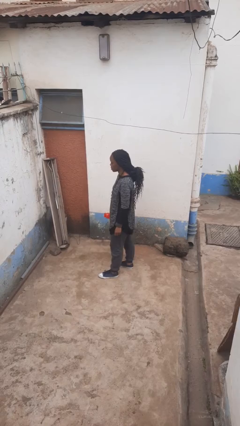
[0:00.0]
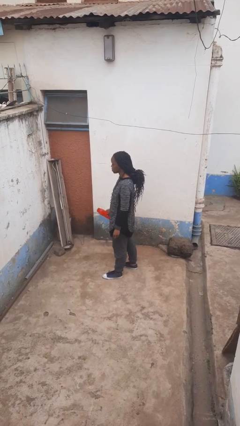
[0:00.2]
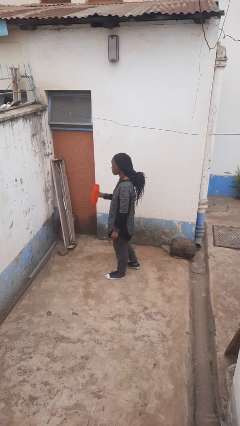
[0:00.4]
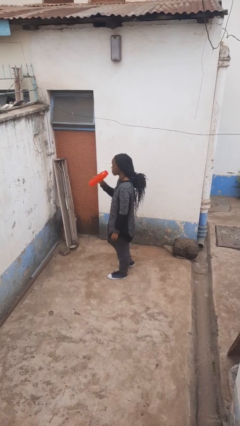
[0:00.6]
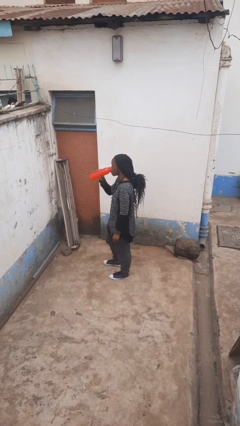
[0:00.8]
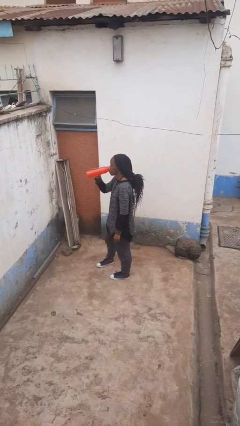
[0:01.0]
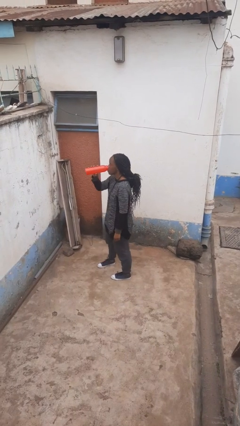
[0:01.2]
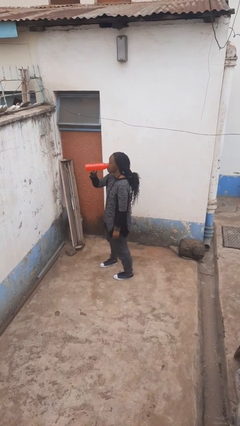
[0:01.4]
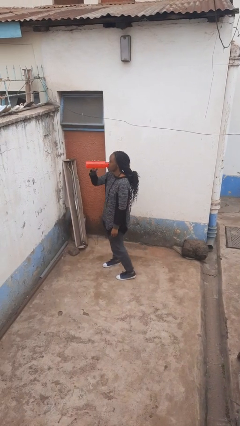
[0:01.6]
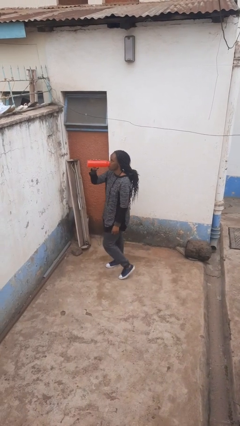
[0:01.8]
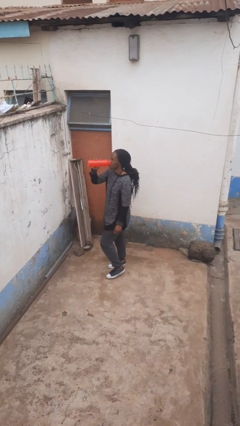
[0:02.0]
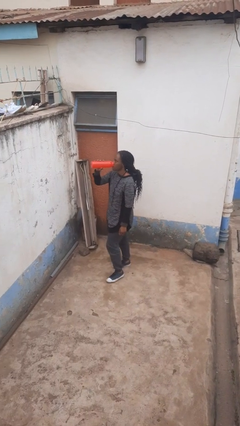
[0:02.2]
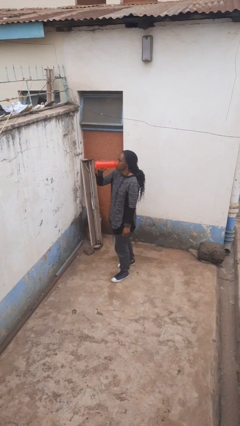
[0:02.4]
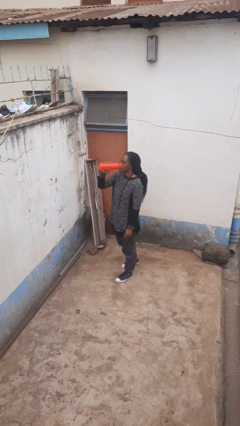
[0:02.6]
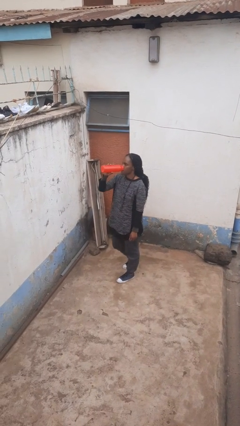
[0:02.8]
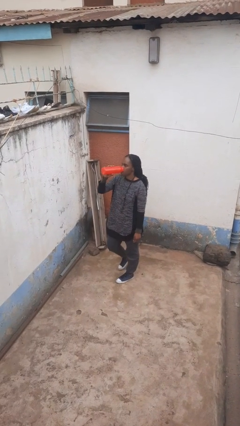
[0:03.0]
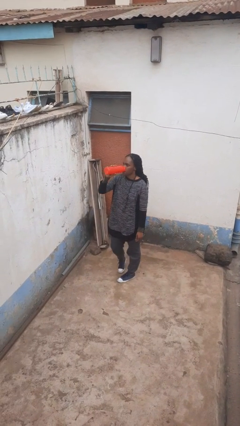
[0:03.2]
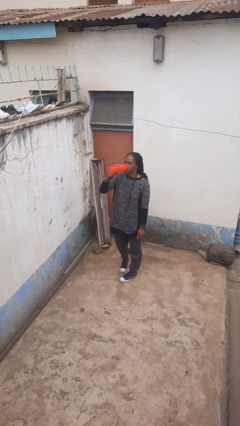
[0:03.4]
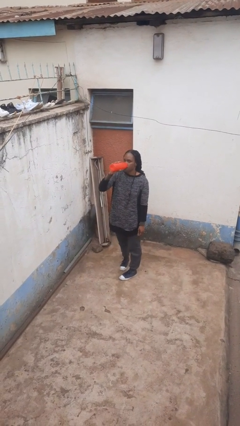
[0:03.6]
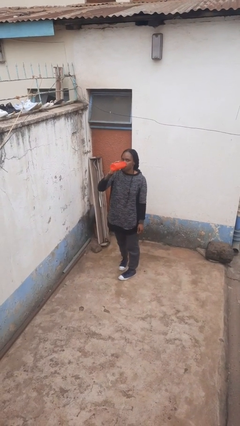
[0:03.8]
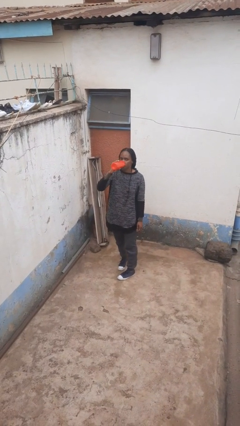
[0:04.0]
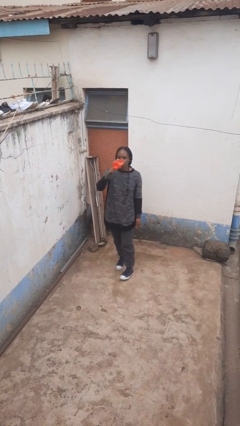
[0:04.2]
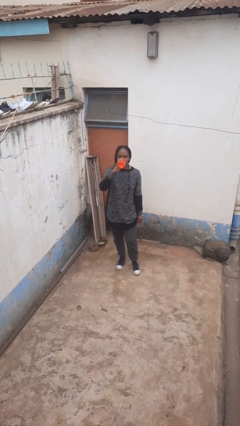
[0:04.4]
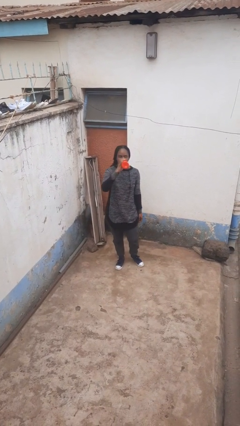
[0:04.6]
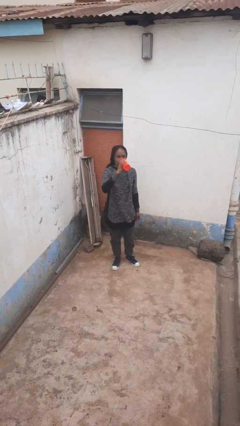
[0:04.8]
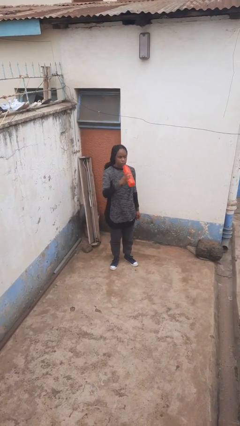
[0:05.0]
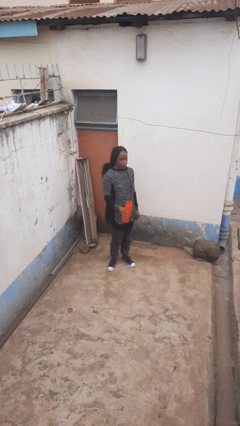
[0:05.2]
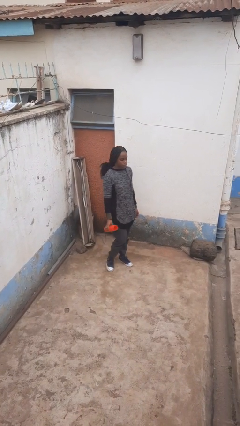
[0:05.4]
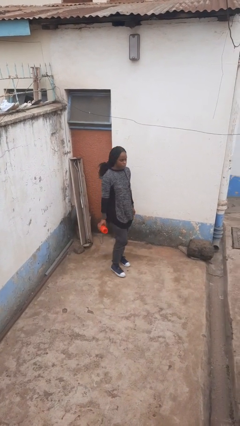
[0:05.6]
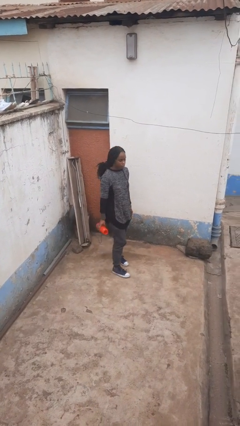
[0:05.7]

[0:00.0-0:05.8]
person drinks from bottle

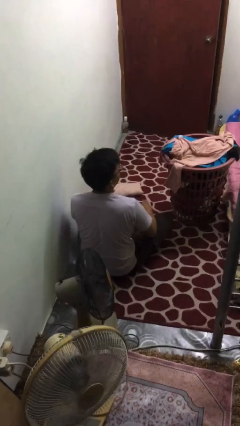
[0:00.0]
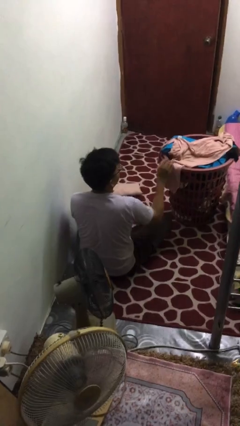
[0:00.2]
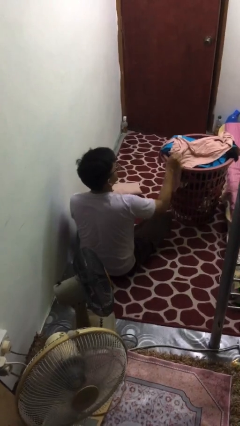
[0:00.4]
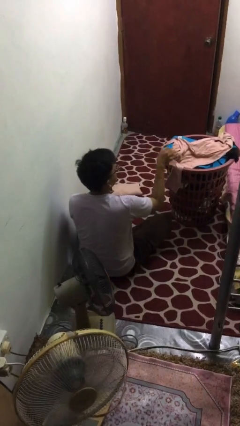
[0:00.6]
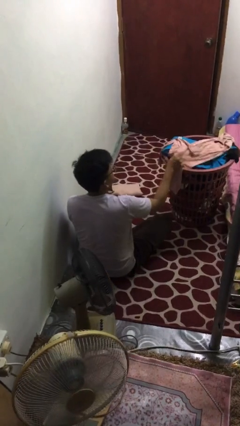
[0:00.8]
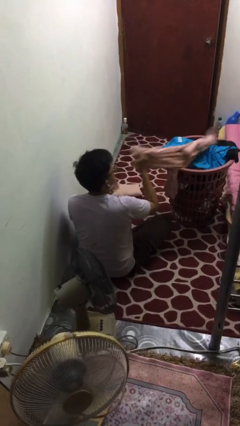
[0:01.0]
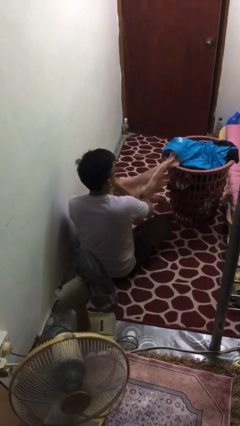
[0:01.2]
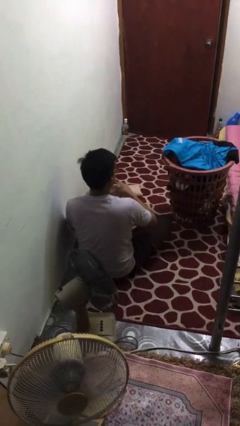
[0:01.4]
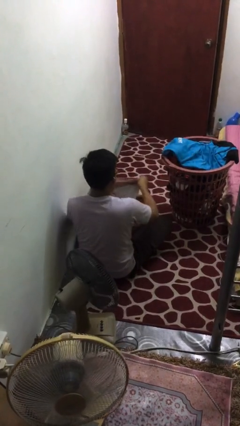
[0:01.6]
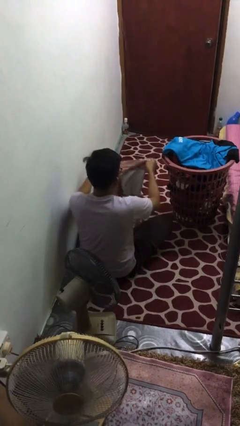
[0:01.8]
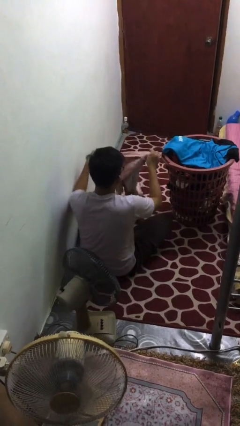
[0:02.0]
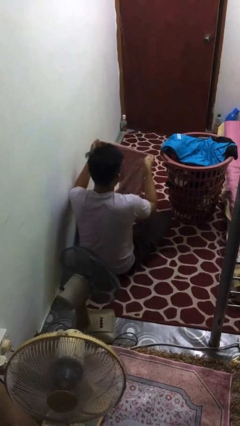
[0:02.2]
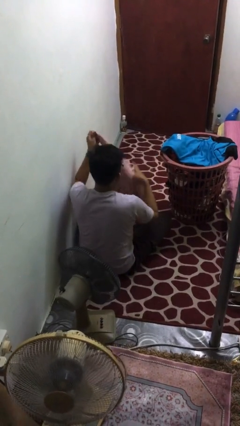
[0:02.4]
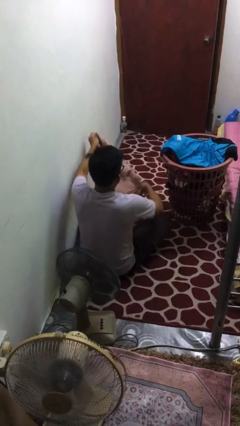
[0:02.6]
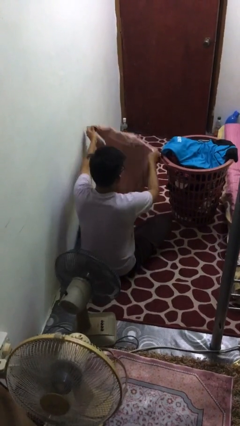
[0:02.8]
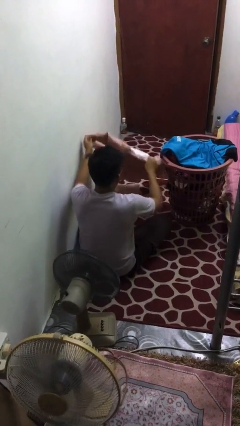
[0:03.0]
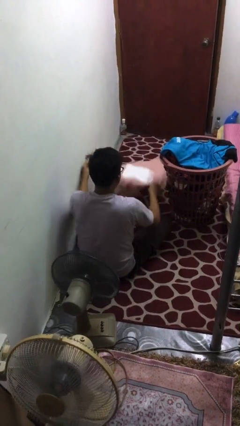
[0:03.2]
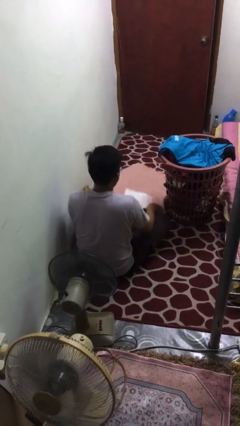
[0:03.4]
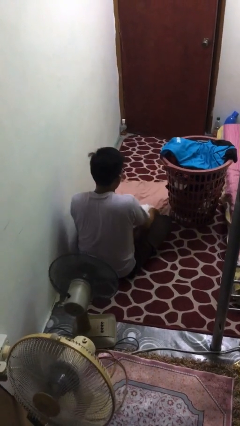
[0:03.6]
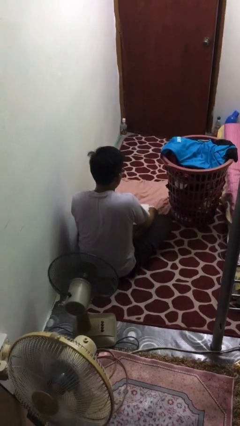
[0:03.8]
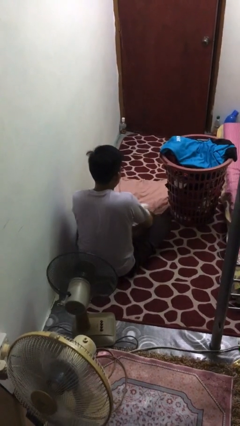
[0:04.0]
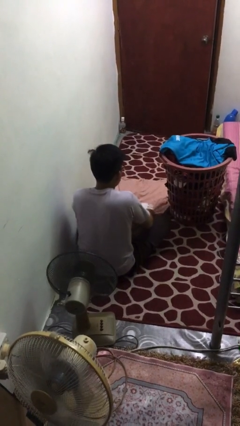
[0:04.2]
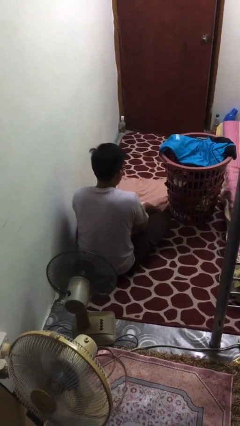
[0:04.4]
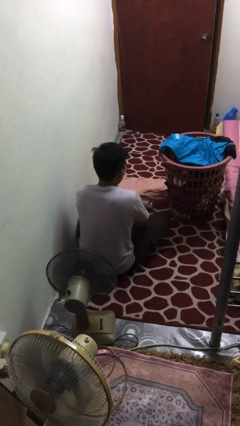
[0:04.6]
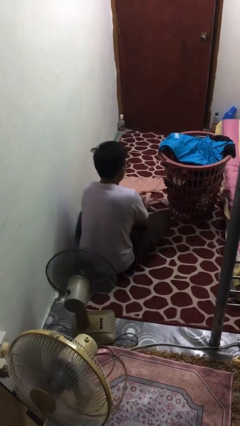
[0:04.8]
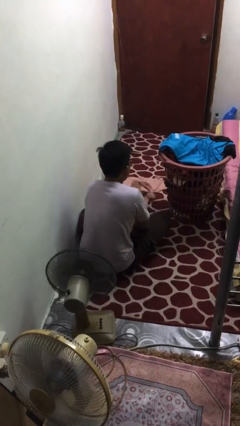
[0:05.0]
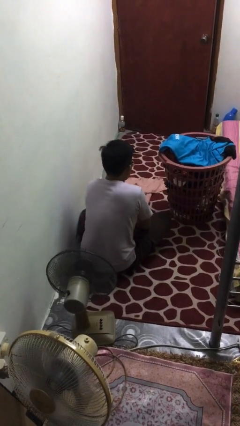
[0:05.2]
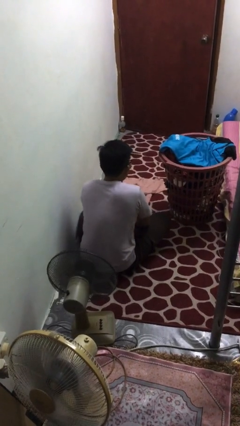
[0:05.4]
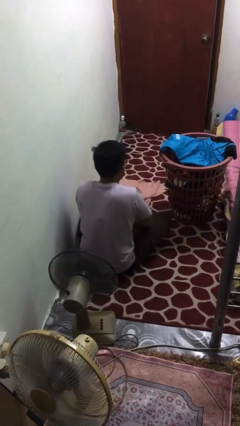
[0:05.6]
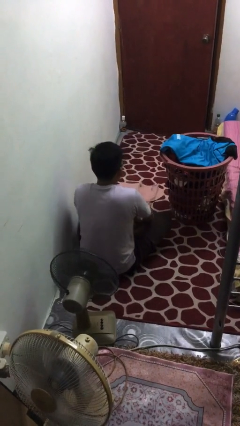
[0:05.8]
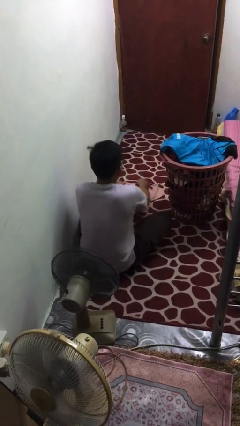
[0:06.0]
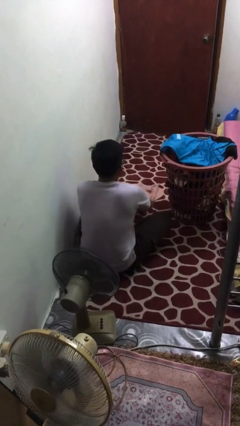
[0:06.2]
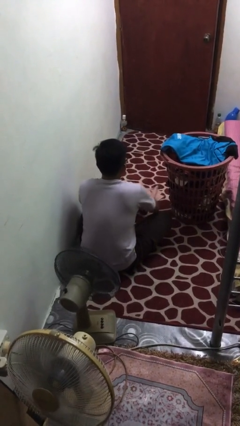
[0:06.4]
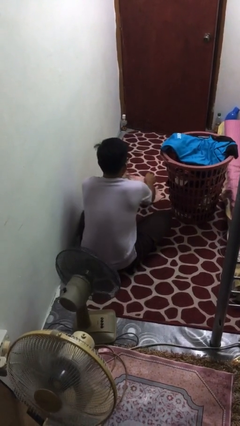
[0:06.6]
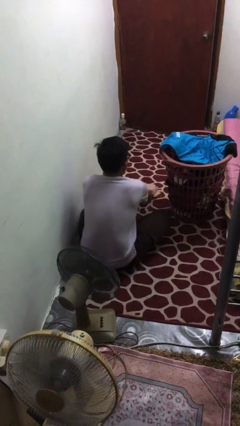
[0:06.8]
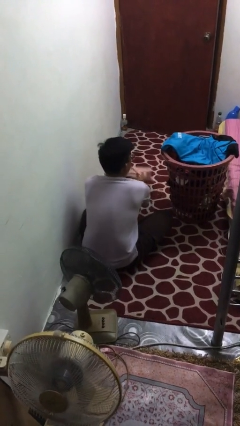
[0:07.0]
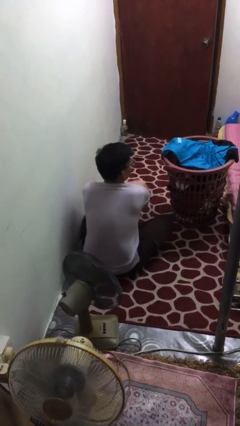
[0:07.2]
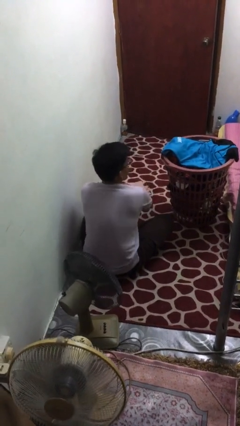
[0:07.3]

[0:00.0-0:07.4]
person folds shirt

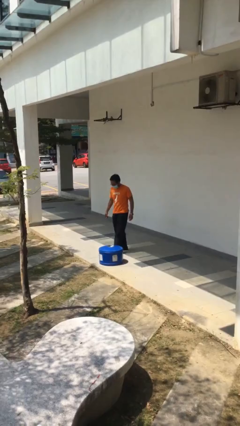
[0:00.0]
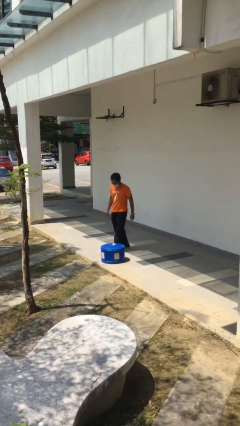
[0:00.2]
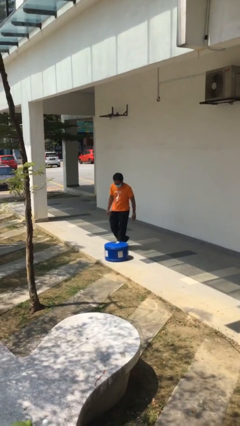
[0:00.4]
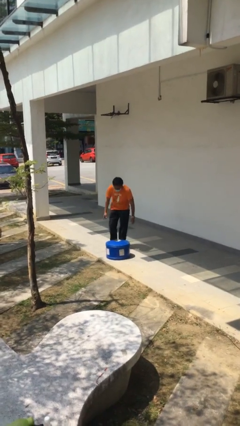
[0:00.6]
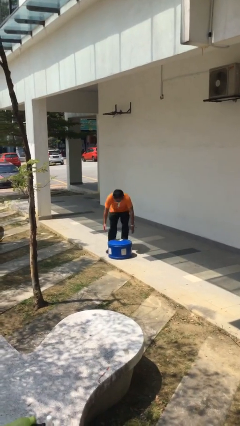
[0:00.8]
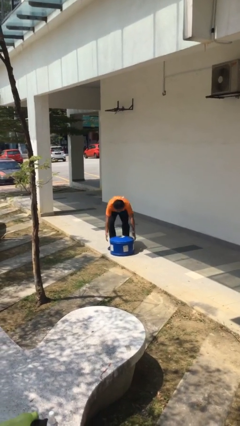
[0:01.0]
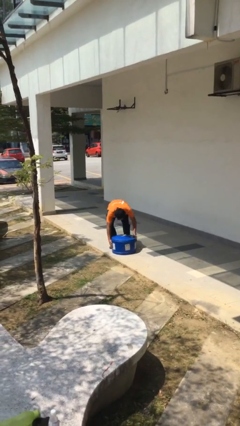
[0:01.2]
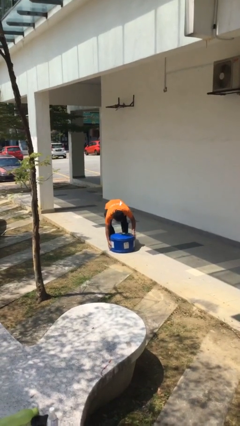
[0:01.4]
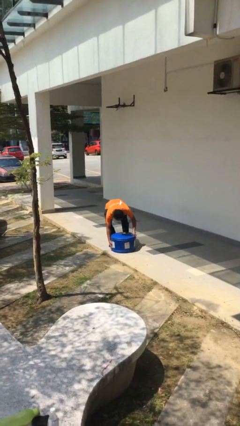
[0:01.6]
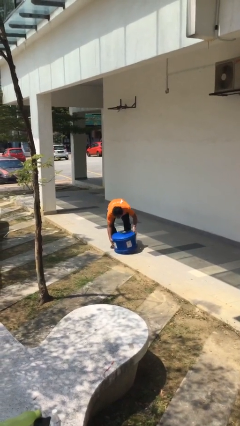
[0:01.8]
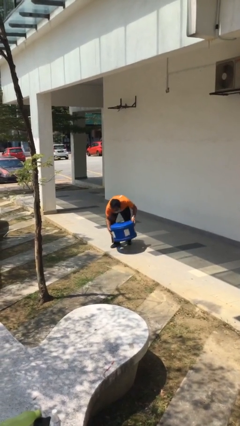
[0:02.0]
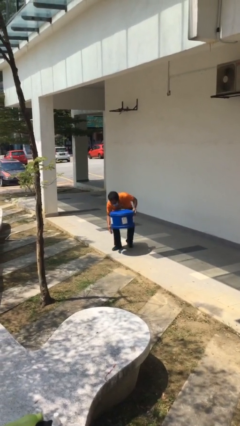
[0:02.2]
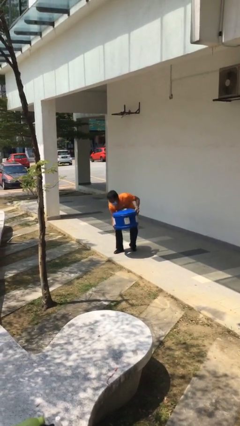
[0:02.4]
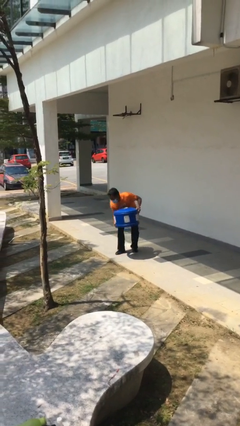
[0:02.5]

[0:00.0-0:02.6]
person picks up object from floor

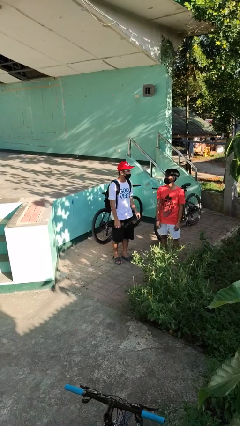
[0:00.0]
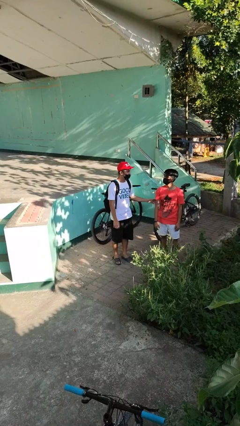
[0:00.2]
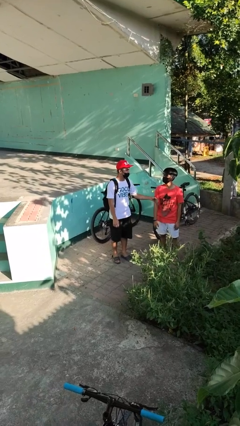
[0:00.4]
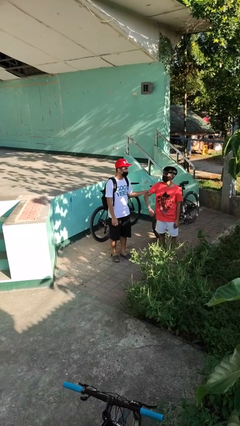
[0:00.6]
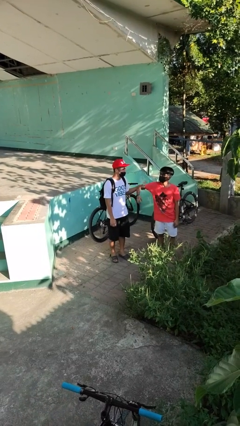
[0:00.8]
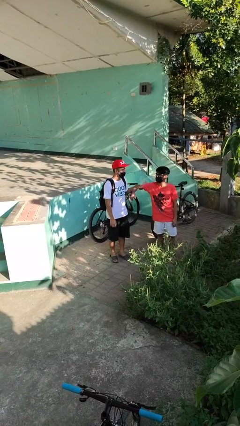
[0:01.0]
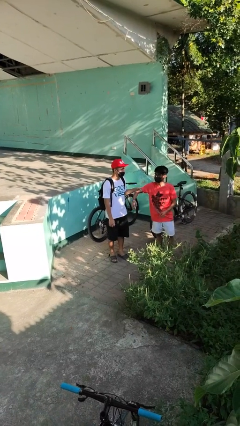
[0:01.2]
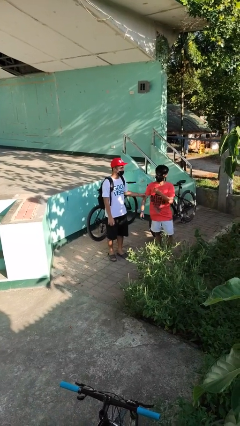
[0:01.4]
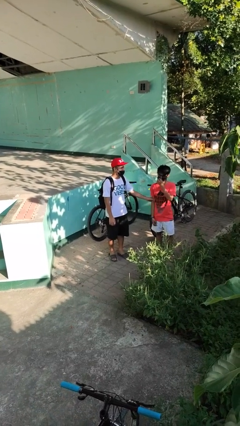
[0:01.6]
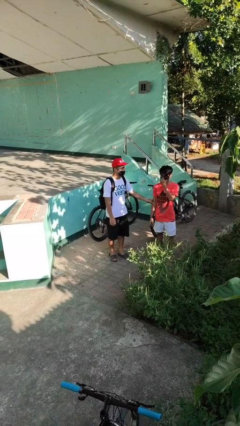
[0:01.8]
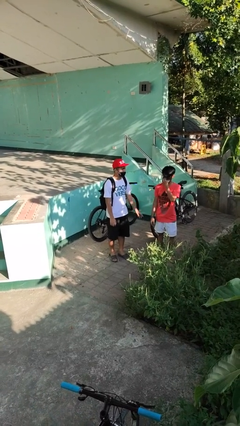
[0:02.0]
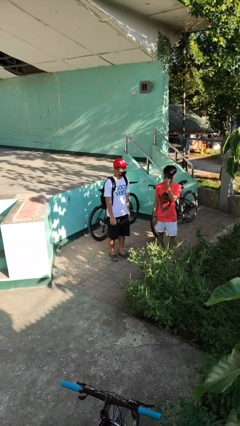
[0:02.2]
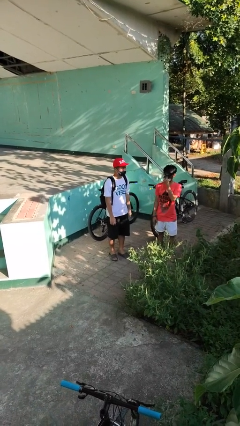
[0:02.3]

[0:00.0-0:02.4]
person grabs person by bicep
